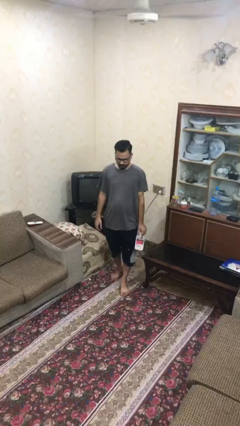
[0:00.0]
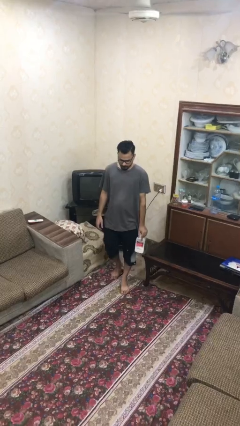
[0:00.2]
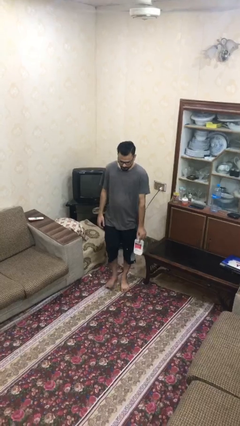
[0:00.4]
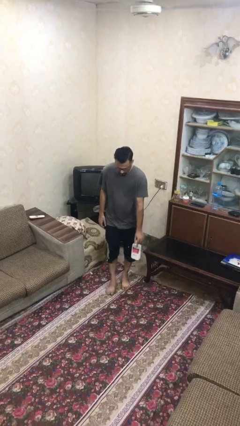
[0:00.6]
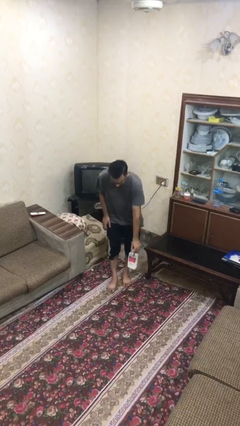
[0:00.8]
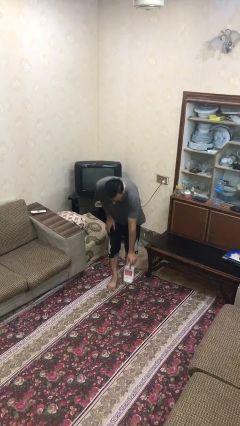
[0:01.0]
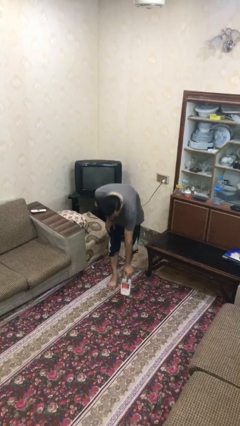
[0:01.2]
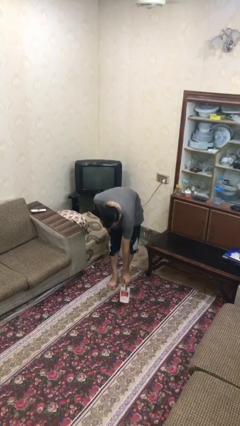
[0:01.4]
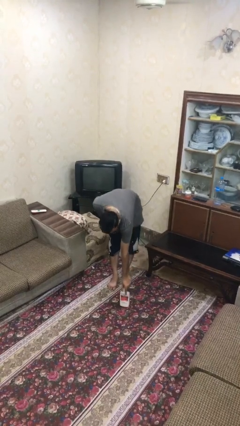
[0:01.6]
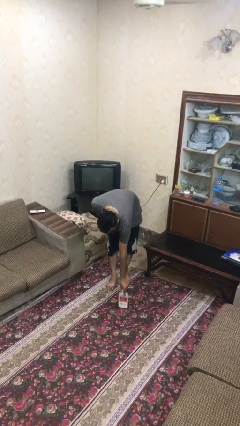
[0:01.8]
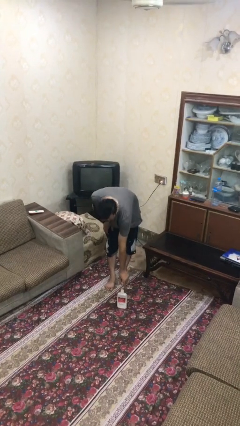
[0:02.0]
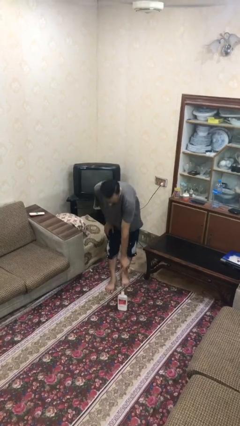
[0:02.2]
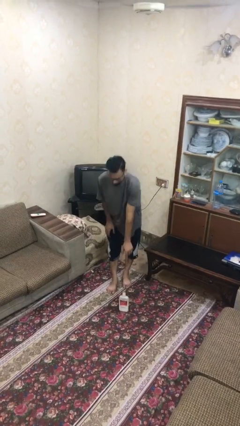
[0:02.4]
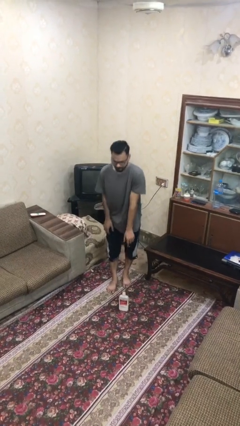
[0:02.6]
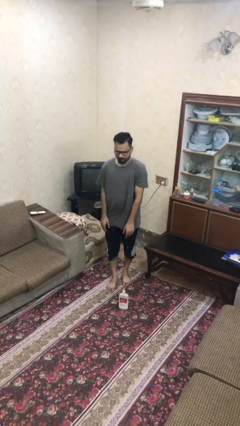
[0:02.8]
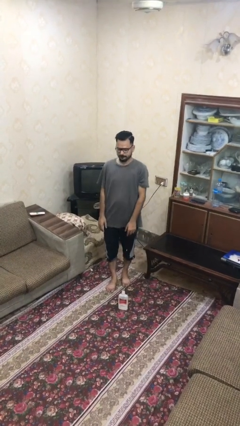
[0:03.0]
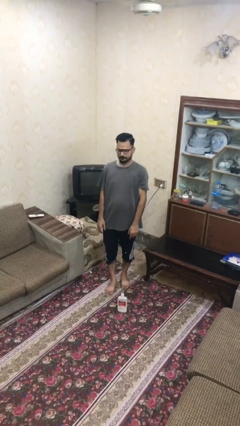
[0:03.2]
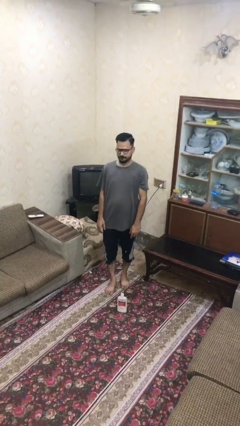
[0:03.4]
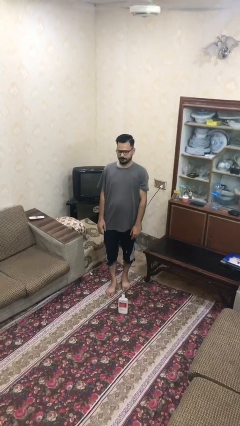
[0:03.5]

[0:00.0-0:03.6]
person puts down object on floor

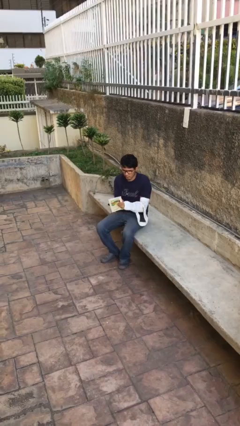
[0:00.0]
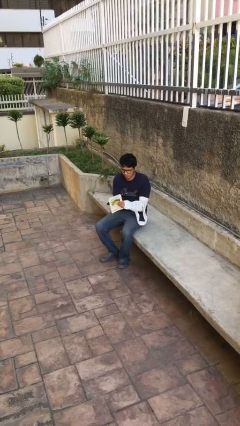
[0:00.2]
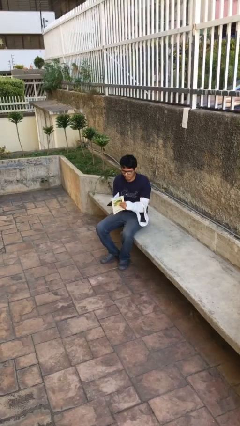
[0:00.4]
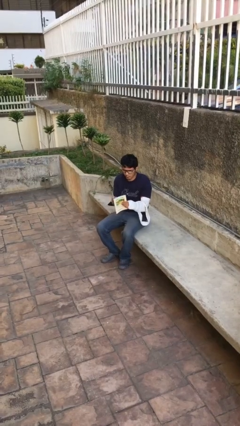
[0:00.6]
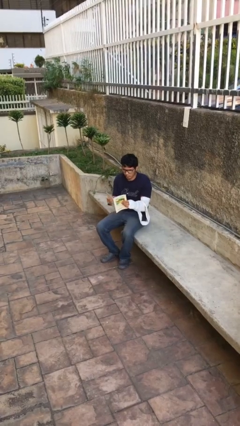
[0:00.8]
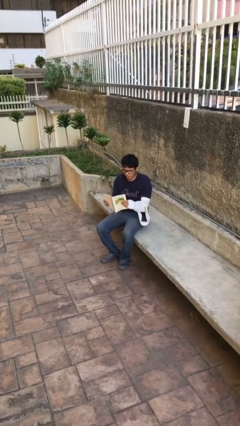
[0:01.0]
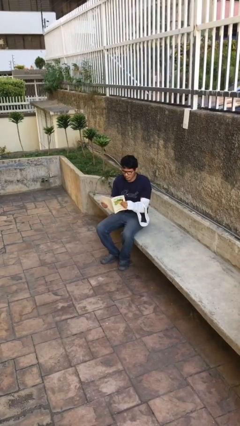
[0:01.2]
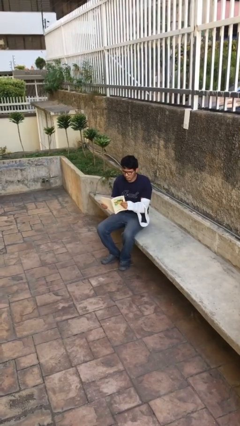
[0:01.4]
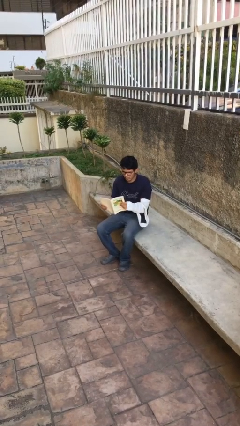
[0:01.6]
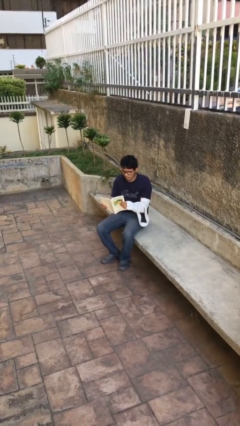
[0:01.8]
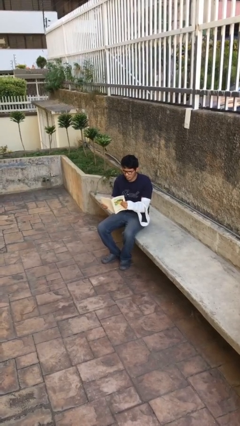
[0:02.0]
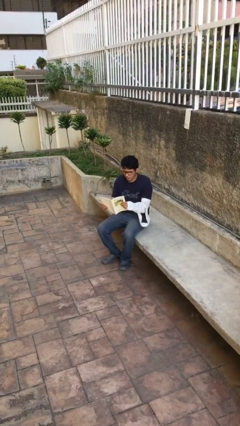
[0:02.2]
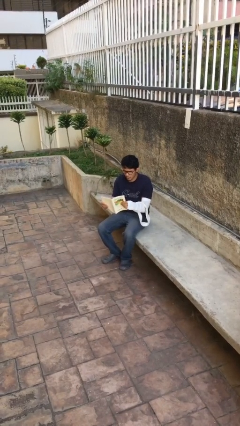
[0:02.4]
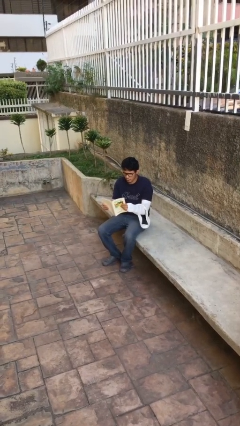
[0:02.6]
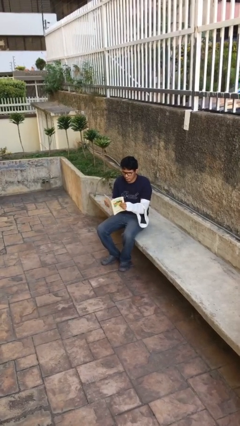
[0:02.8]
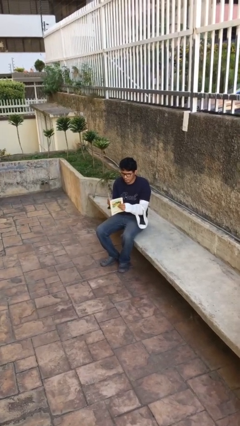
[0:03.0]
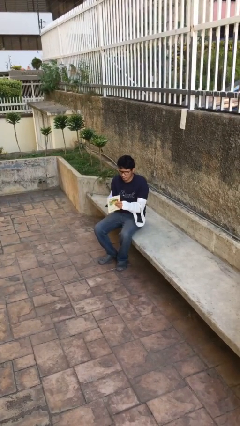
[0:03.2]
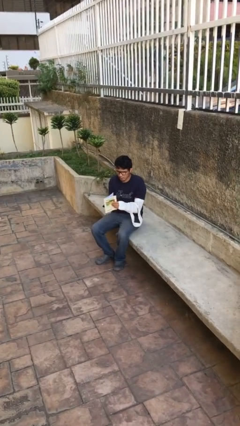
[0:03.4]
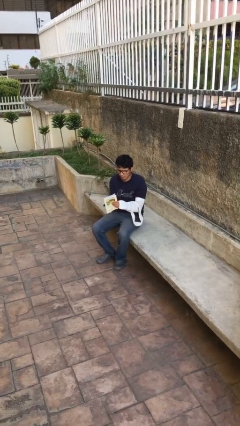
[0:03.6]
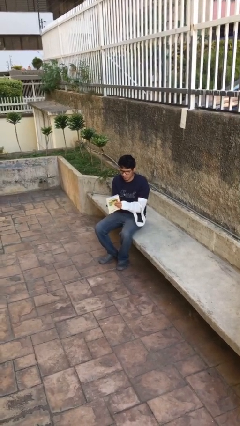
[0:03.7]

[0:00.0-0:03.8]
person reads document

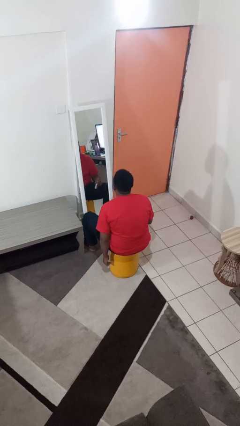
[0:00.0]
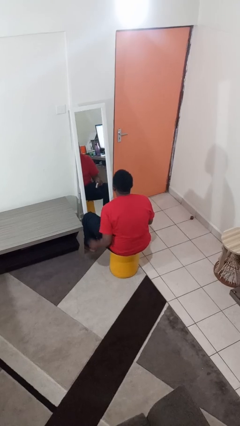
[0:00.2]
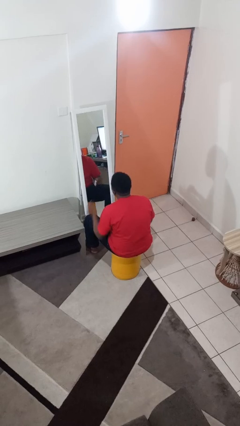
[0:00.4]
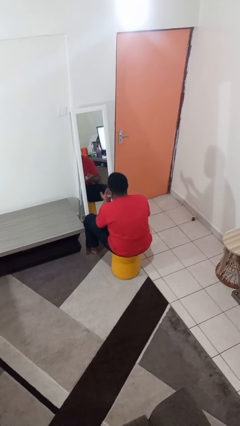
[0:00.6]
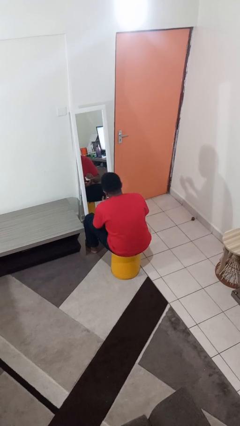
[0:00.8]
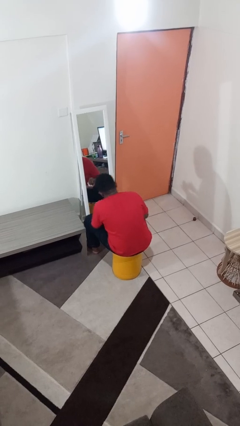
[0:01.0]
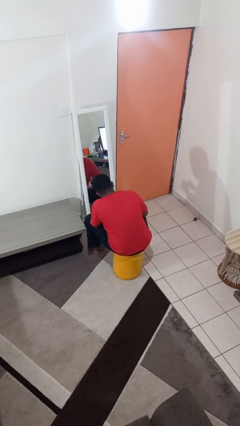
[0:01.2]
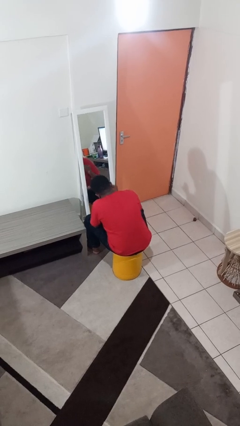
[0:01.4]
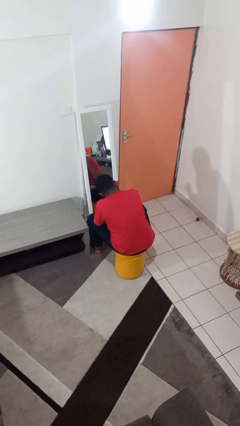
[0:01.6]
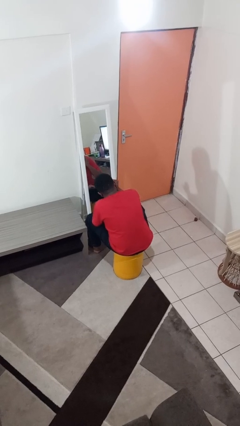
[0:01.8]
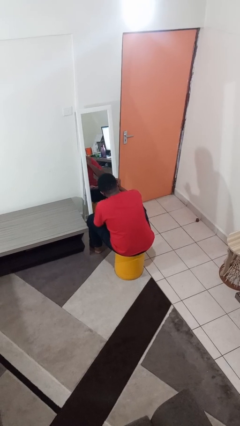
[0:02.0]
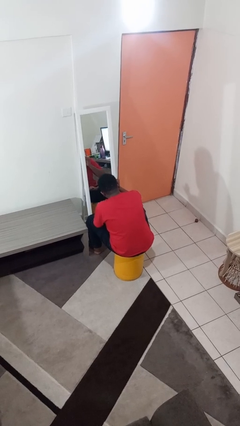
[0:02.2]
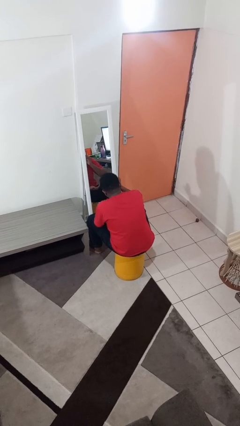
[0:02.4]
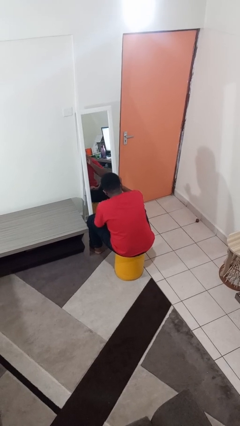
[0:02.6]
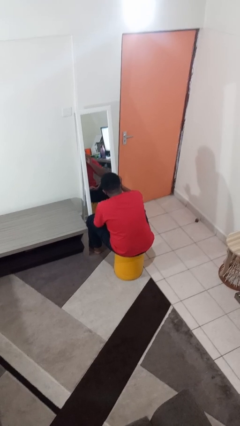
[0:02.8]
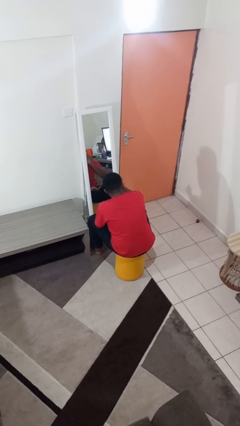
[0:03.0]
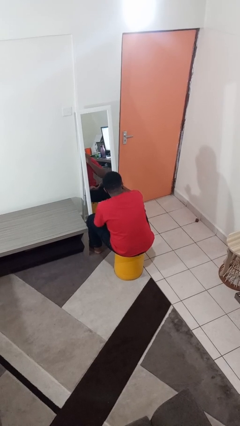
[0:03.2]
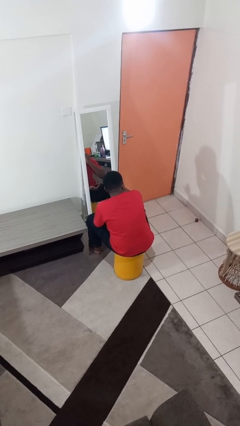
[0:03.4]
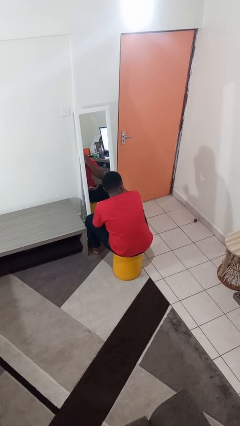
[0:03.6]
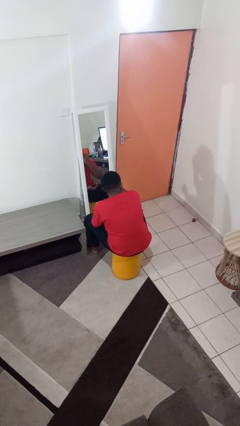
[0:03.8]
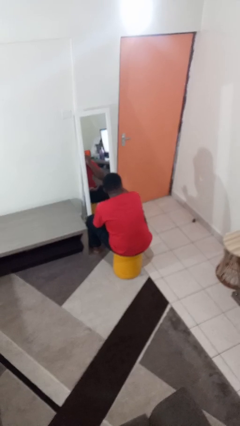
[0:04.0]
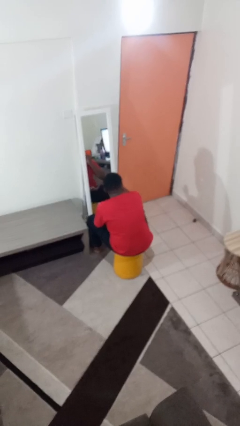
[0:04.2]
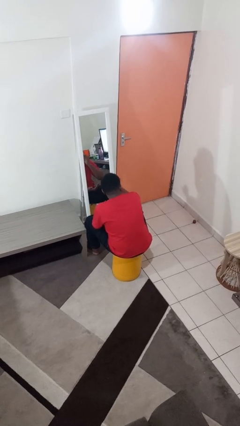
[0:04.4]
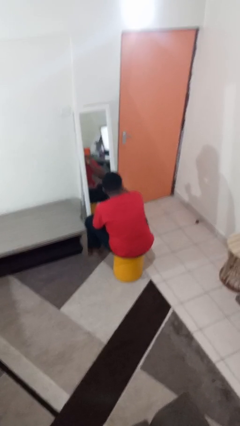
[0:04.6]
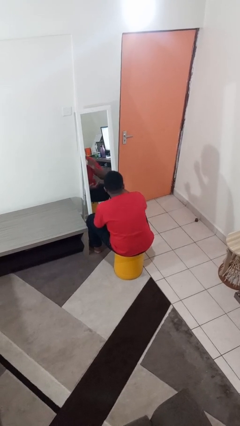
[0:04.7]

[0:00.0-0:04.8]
person applies foundation makeup

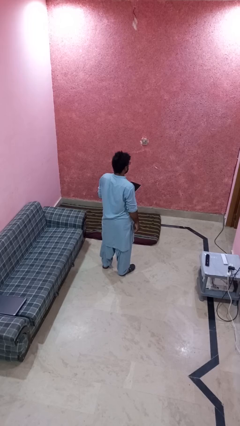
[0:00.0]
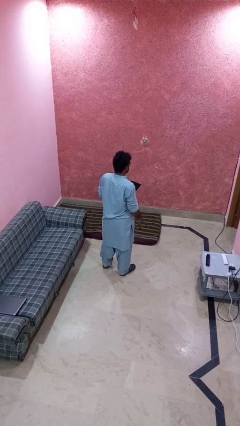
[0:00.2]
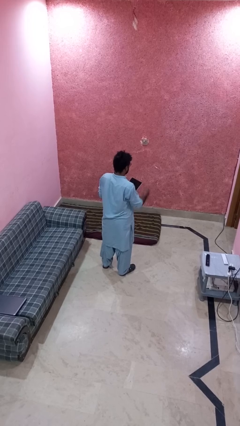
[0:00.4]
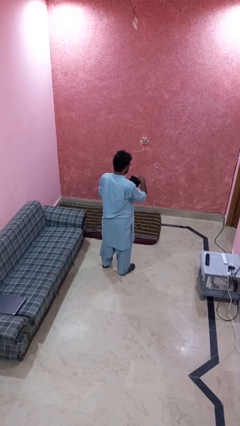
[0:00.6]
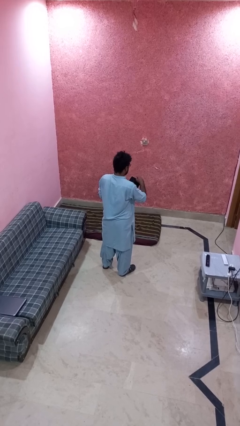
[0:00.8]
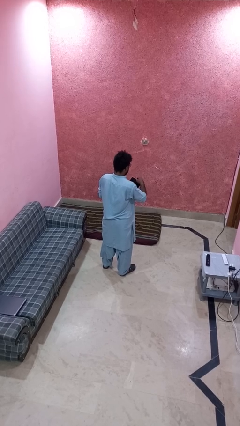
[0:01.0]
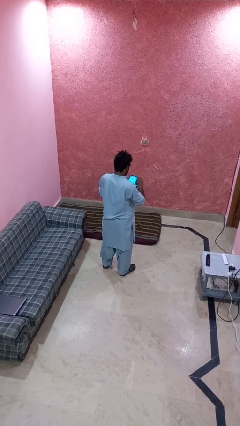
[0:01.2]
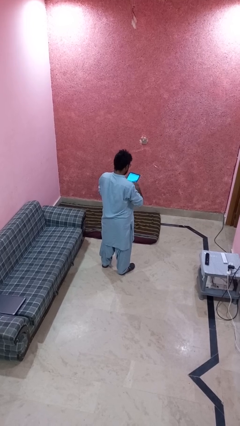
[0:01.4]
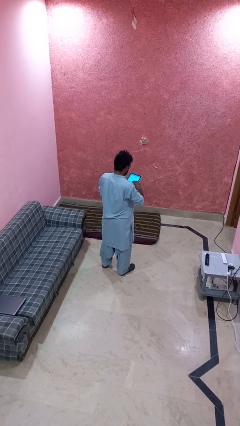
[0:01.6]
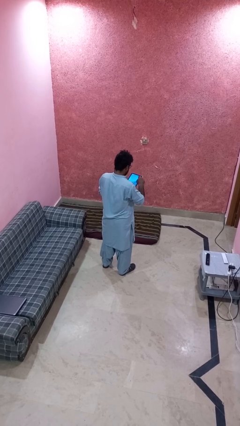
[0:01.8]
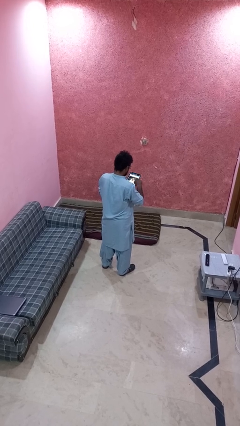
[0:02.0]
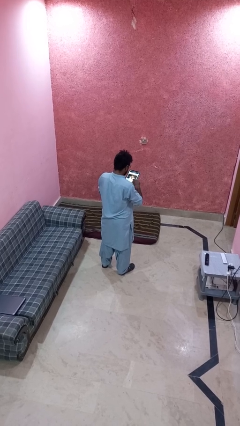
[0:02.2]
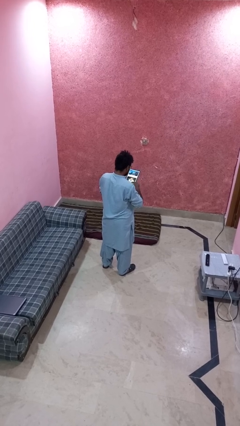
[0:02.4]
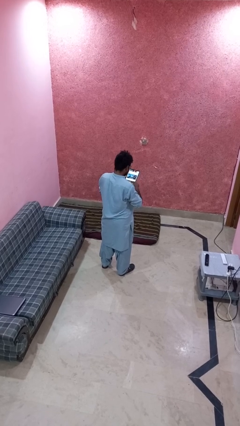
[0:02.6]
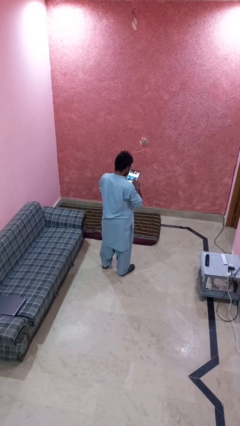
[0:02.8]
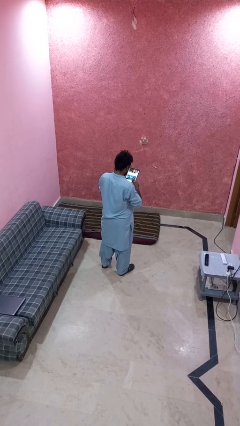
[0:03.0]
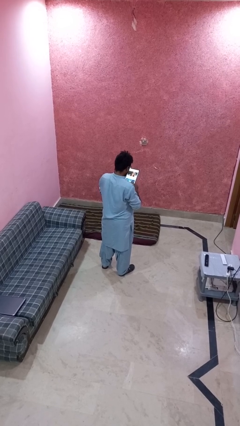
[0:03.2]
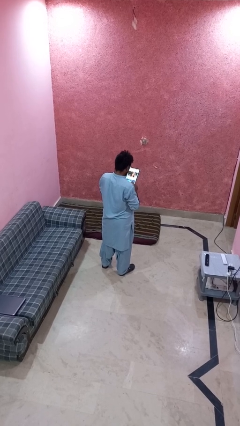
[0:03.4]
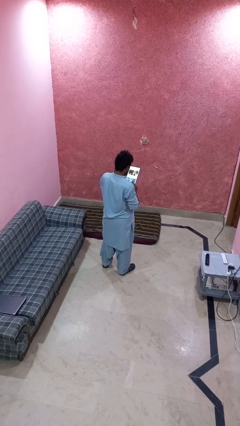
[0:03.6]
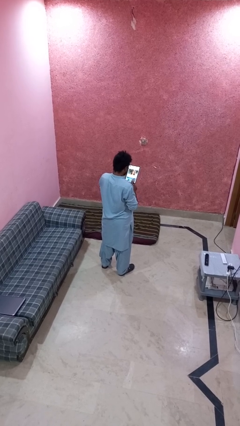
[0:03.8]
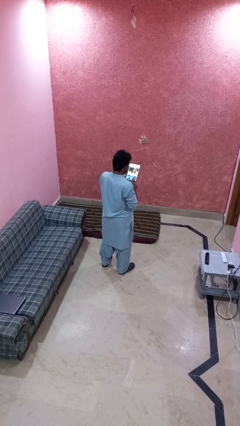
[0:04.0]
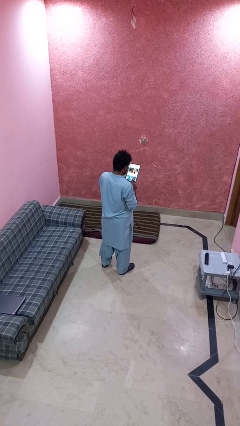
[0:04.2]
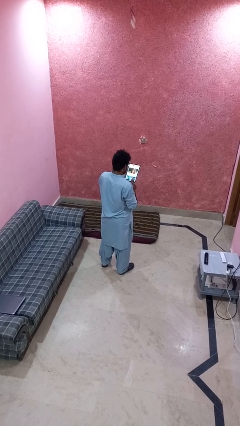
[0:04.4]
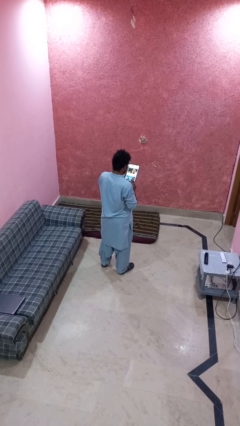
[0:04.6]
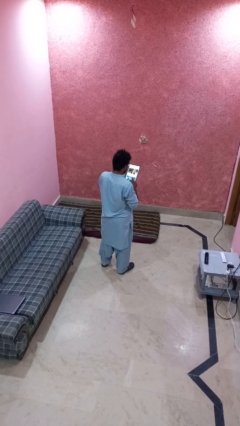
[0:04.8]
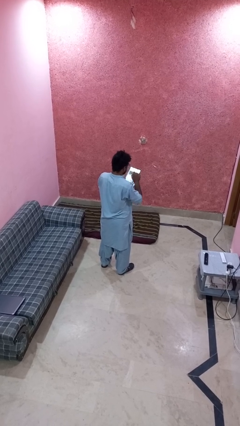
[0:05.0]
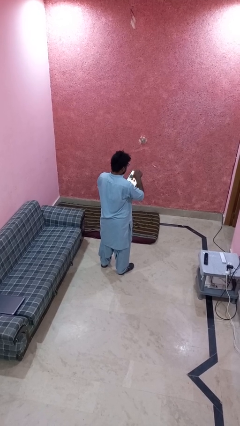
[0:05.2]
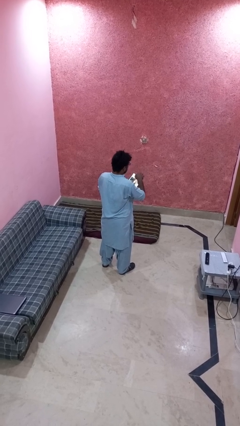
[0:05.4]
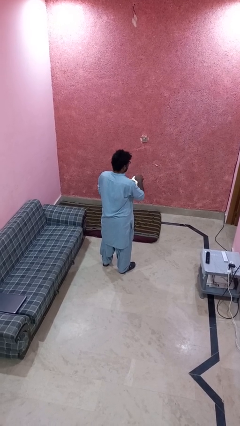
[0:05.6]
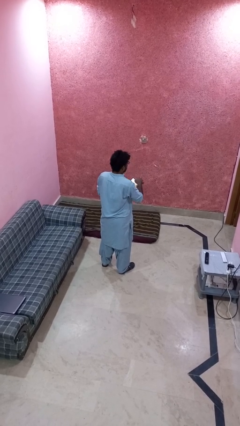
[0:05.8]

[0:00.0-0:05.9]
person interacts with tablet
